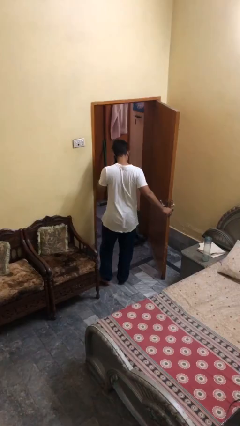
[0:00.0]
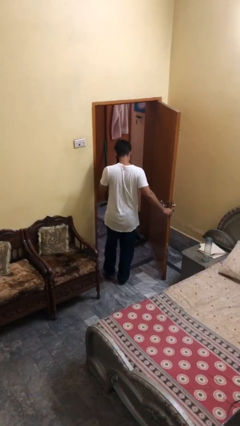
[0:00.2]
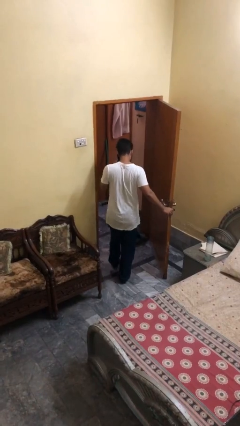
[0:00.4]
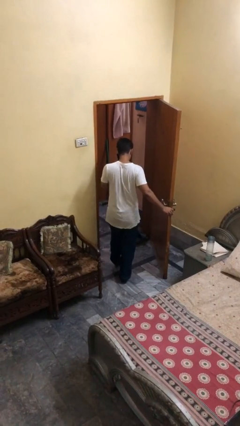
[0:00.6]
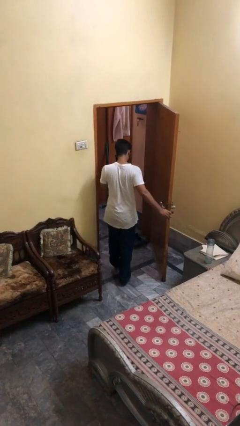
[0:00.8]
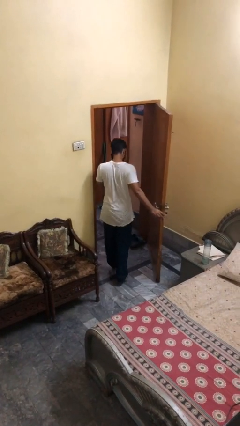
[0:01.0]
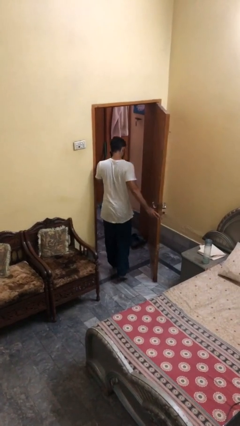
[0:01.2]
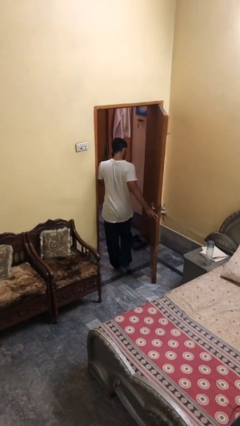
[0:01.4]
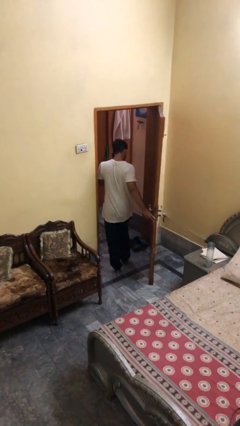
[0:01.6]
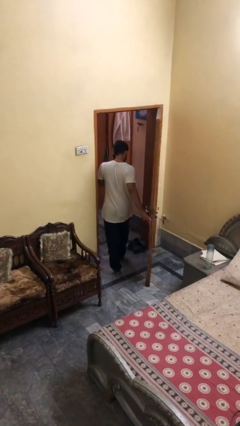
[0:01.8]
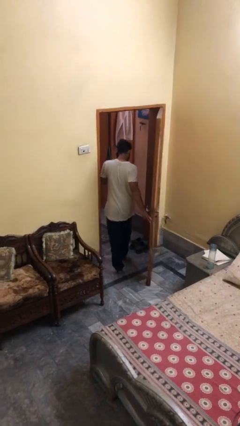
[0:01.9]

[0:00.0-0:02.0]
person exits scene through structure

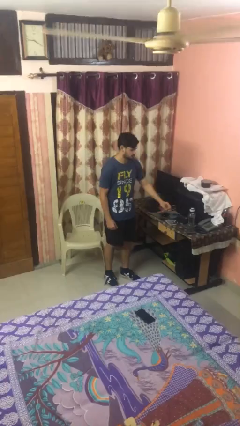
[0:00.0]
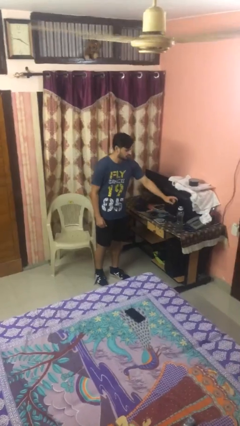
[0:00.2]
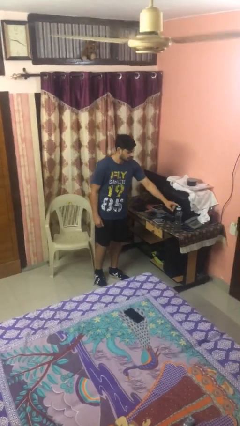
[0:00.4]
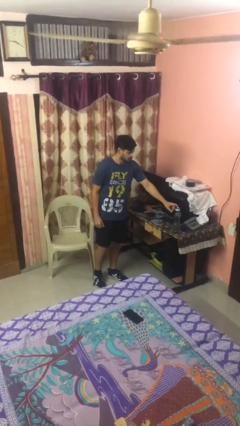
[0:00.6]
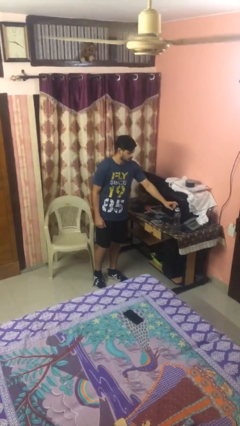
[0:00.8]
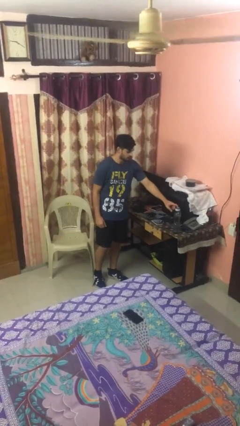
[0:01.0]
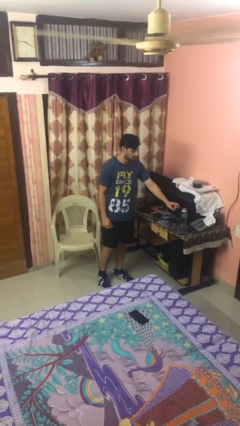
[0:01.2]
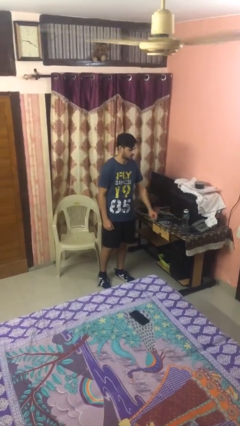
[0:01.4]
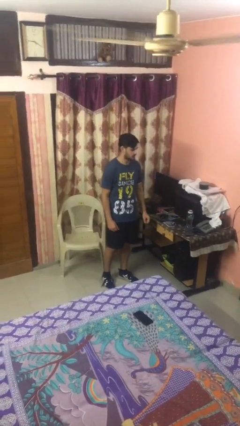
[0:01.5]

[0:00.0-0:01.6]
person taps object with finger

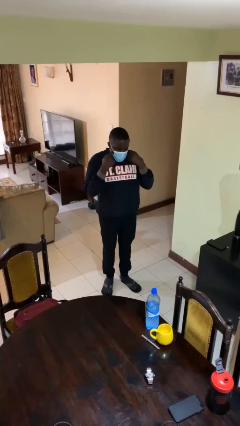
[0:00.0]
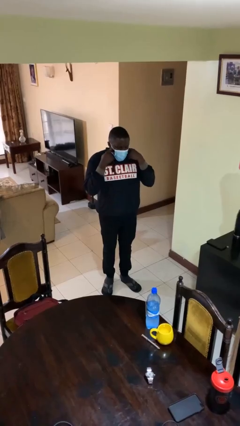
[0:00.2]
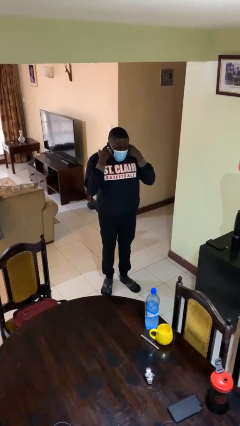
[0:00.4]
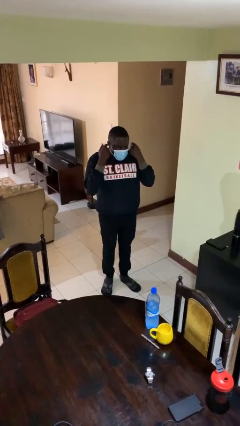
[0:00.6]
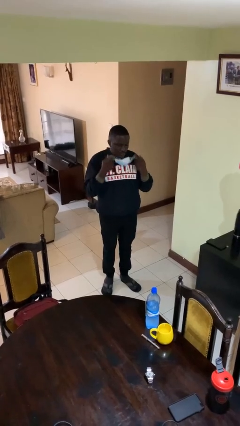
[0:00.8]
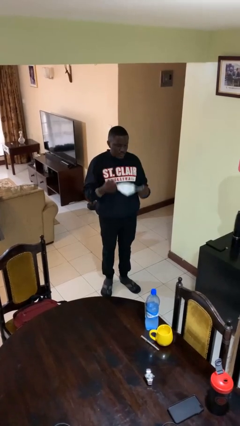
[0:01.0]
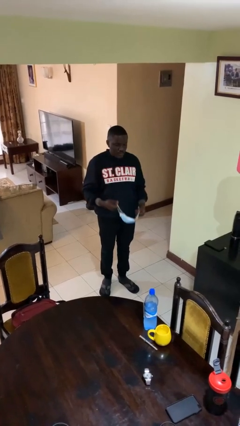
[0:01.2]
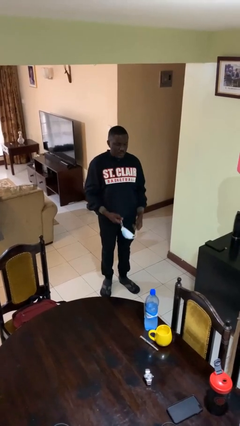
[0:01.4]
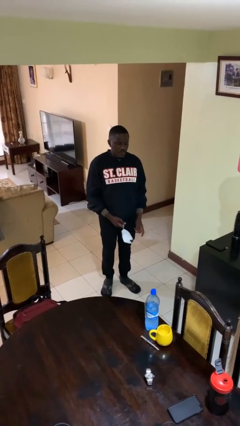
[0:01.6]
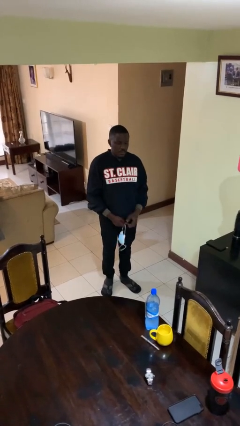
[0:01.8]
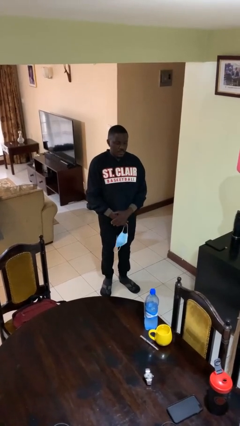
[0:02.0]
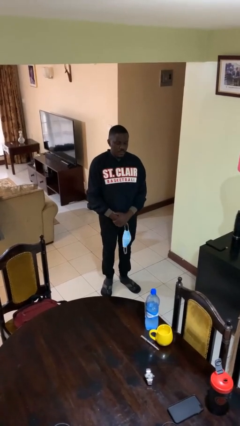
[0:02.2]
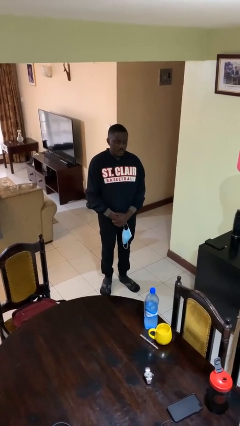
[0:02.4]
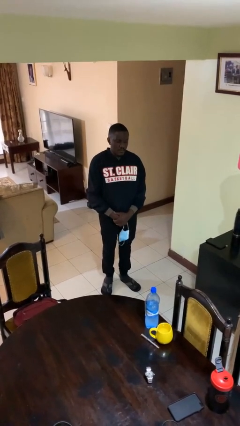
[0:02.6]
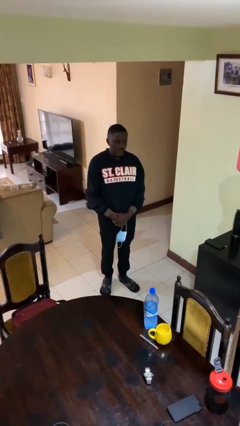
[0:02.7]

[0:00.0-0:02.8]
person takes off facemask

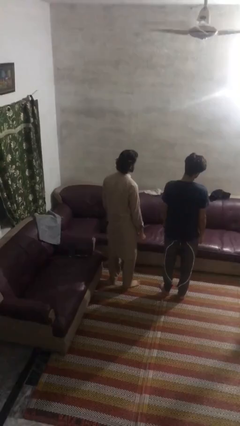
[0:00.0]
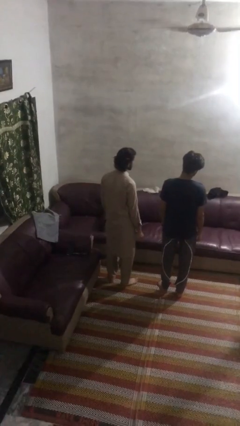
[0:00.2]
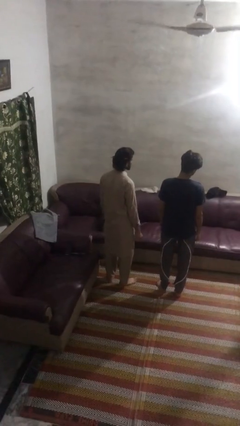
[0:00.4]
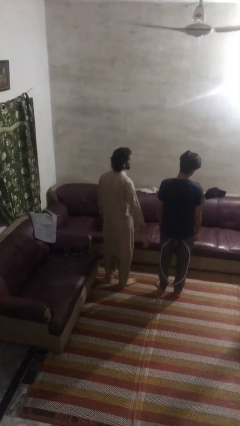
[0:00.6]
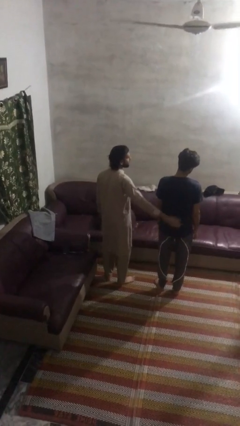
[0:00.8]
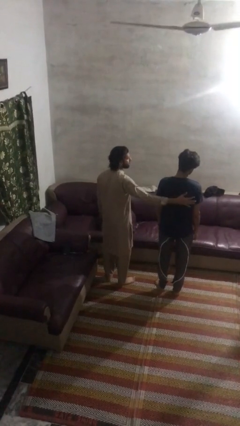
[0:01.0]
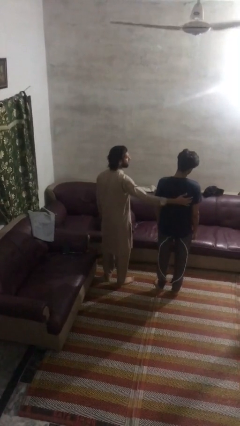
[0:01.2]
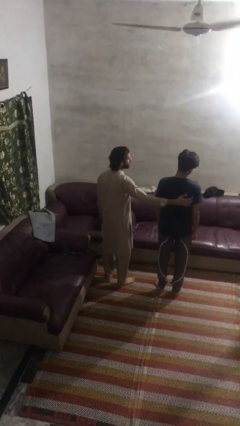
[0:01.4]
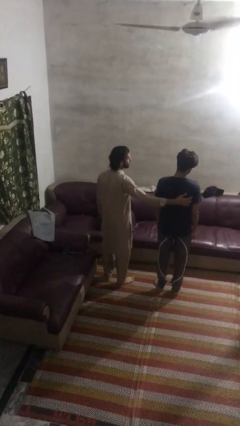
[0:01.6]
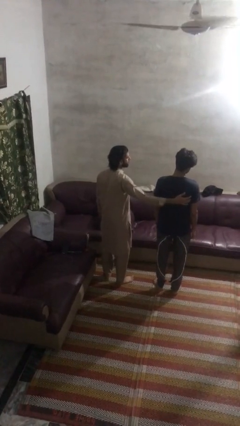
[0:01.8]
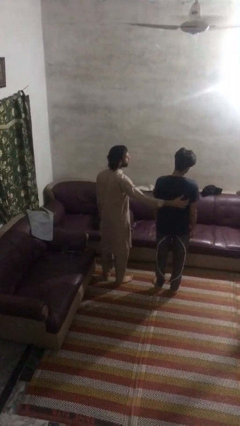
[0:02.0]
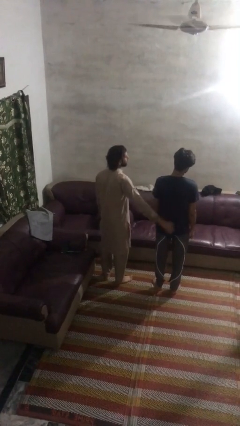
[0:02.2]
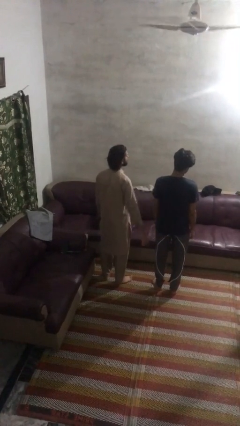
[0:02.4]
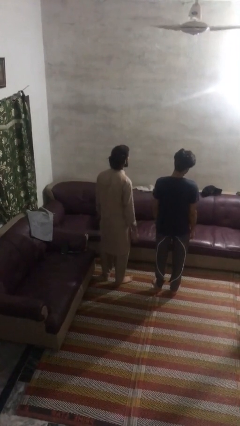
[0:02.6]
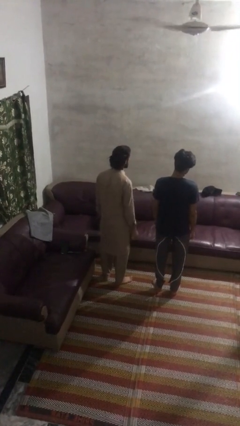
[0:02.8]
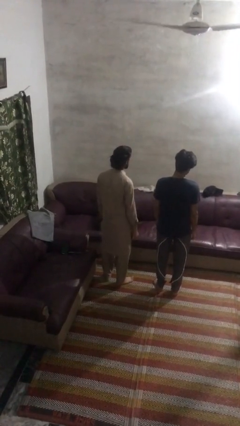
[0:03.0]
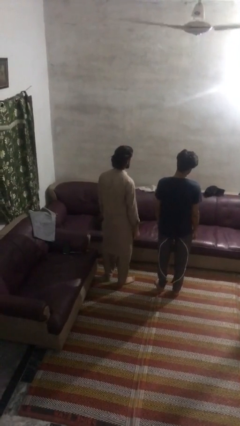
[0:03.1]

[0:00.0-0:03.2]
person touches back of person

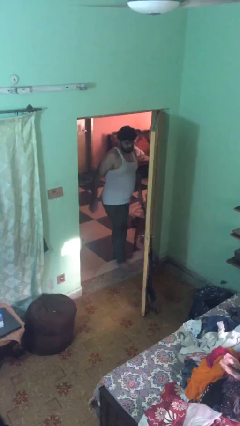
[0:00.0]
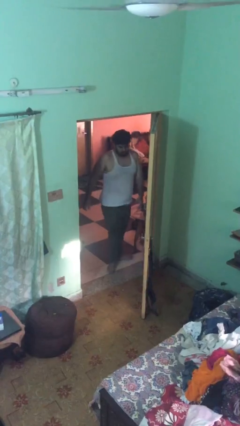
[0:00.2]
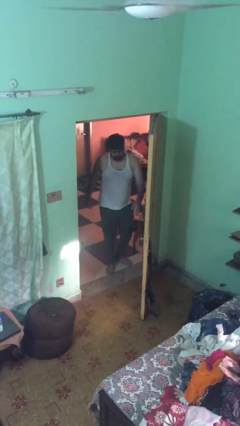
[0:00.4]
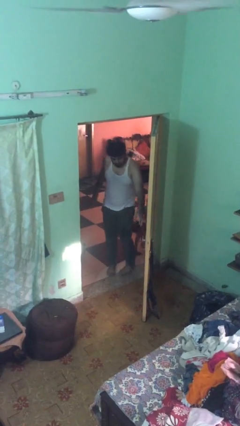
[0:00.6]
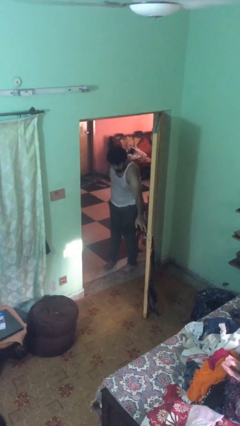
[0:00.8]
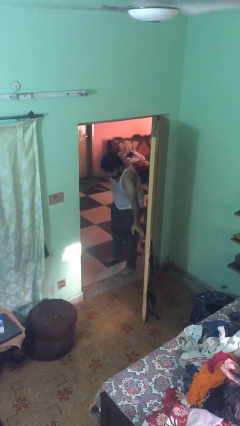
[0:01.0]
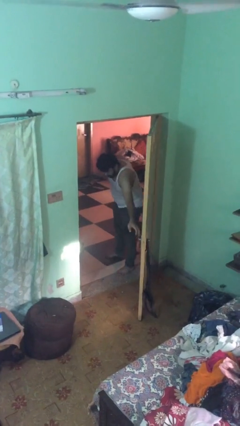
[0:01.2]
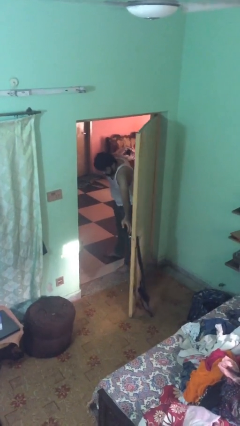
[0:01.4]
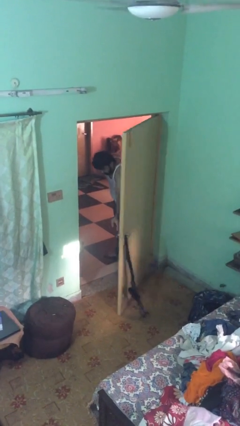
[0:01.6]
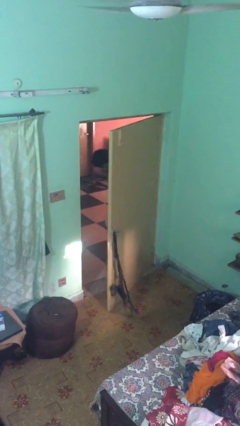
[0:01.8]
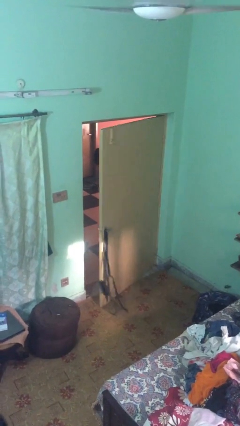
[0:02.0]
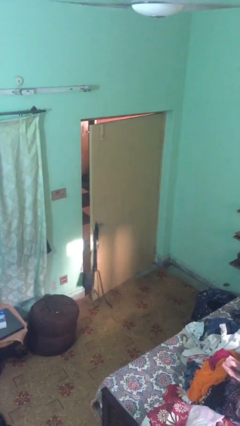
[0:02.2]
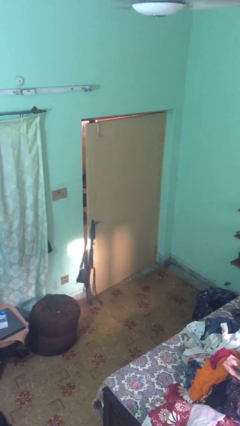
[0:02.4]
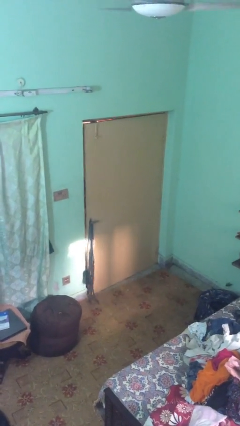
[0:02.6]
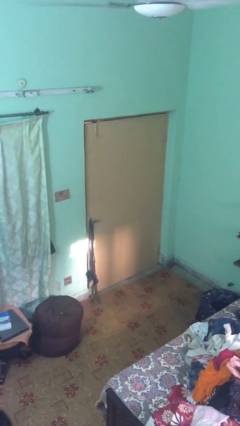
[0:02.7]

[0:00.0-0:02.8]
person closes facility door

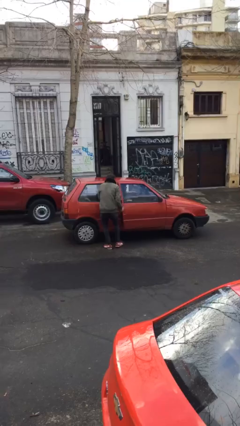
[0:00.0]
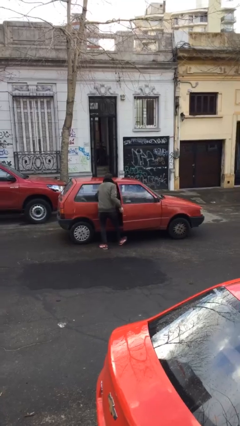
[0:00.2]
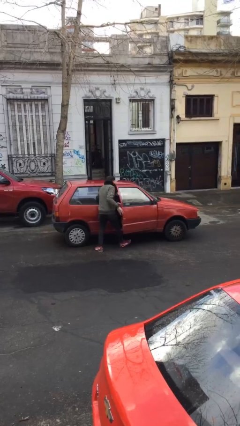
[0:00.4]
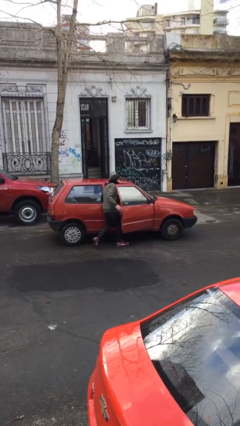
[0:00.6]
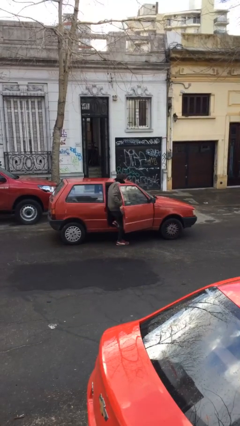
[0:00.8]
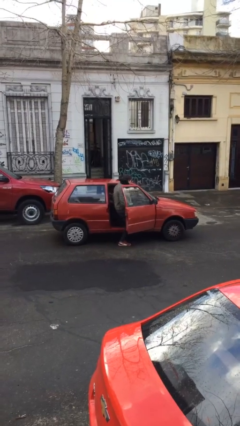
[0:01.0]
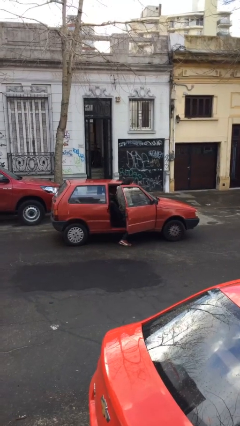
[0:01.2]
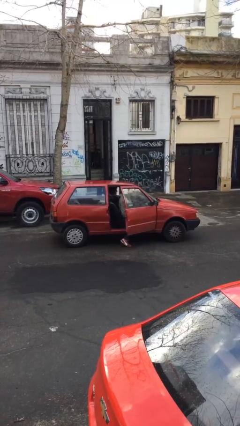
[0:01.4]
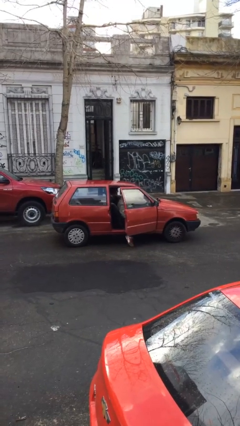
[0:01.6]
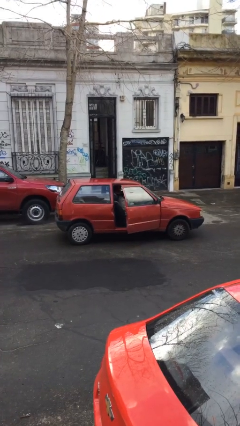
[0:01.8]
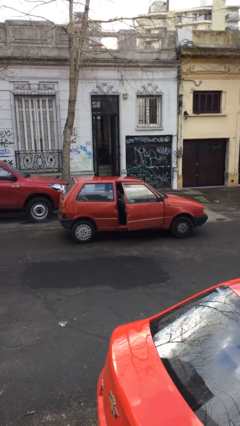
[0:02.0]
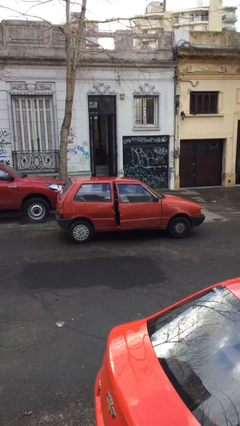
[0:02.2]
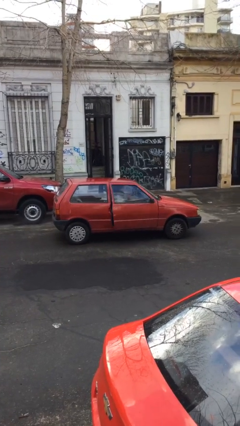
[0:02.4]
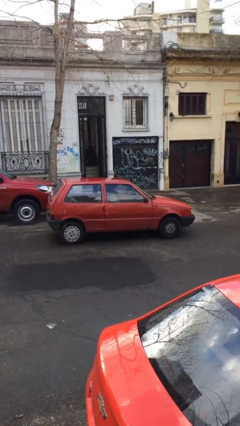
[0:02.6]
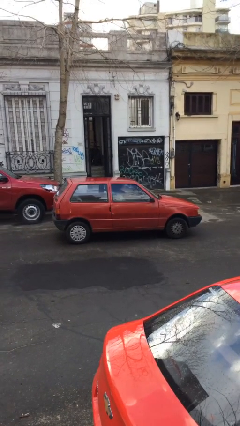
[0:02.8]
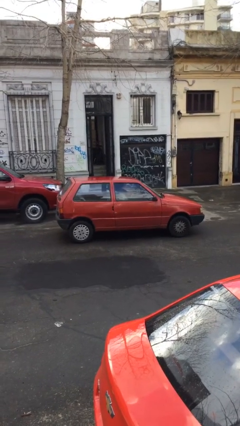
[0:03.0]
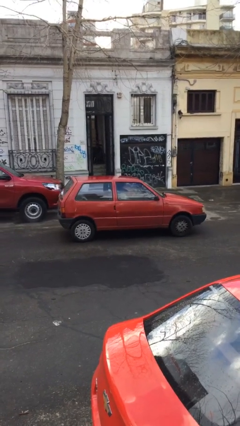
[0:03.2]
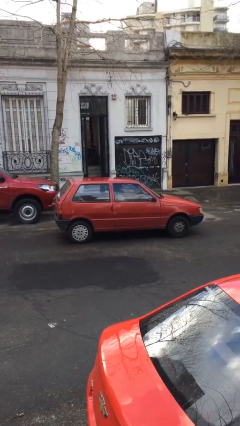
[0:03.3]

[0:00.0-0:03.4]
car picks up person

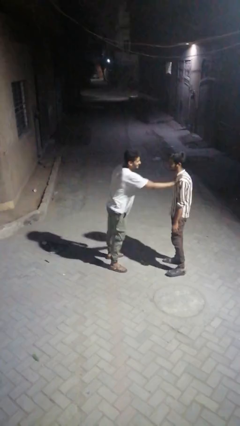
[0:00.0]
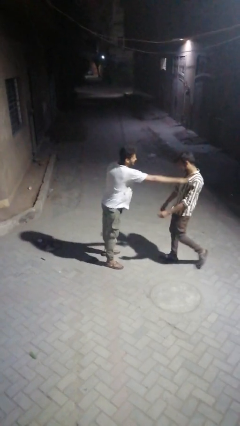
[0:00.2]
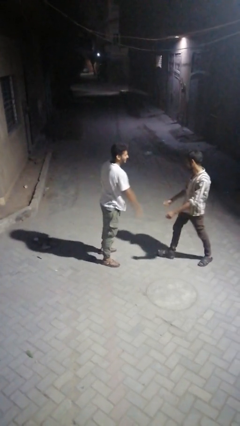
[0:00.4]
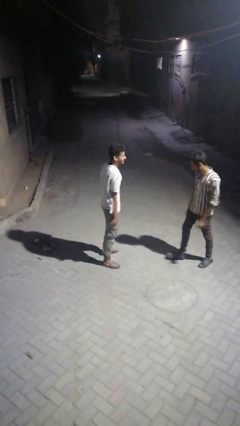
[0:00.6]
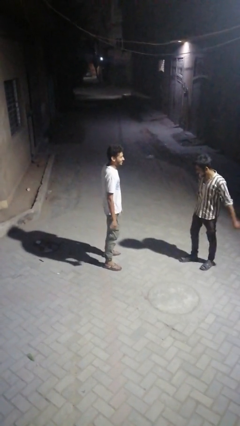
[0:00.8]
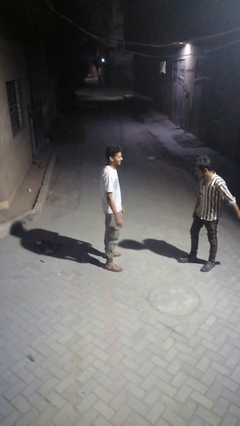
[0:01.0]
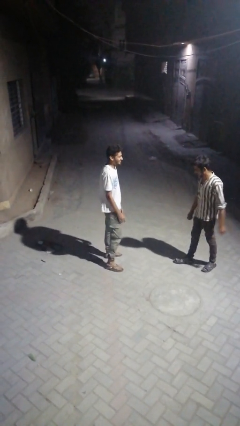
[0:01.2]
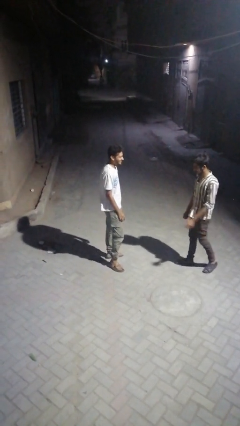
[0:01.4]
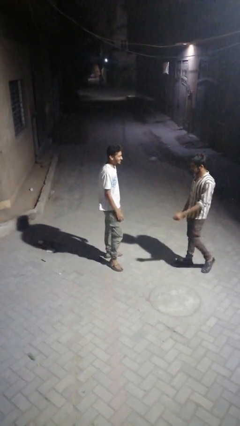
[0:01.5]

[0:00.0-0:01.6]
person shoves person
